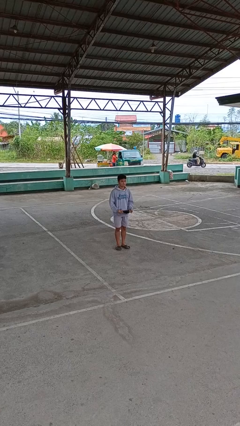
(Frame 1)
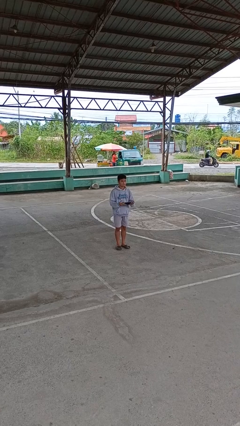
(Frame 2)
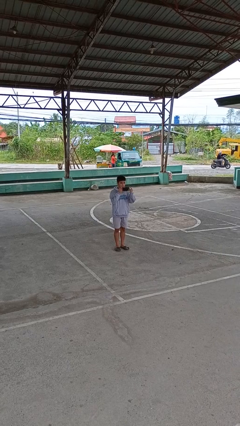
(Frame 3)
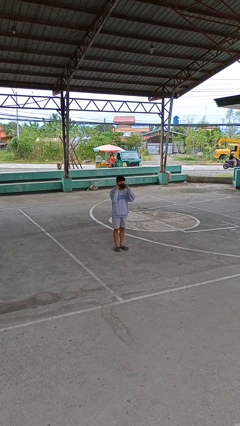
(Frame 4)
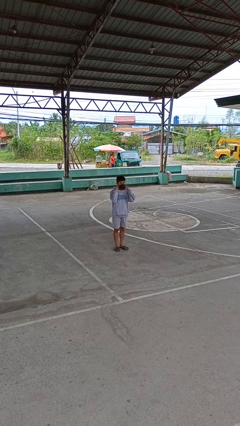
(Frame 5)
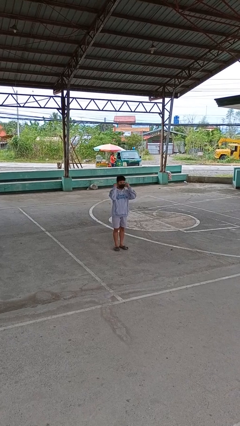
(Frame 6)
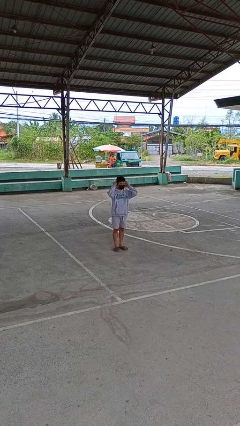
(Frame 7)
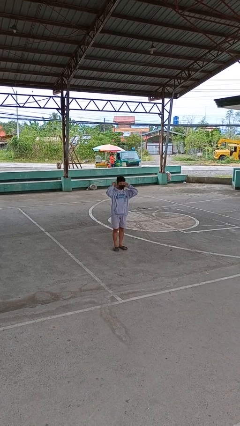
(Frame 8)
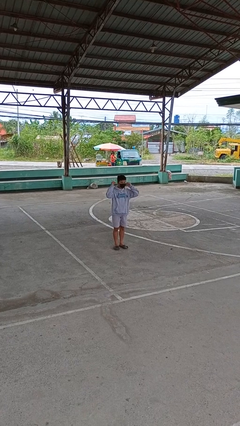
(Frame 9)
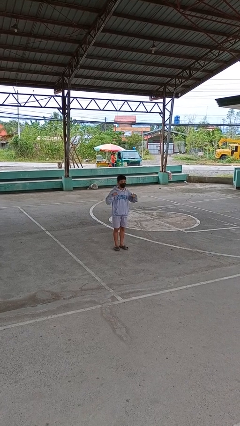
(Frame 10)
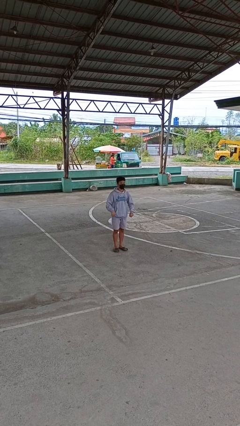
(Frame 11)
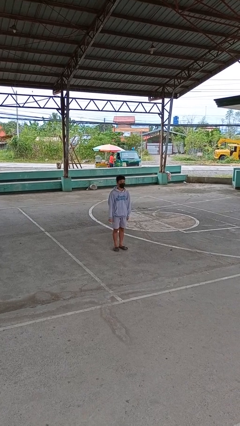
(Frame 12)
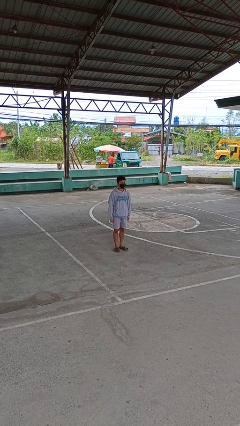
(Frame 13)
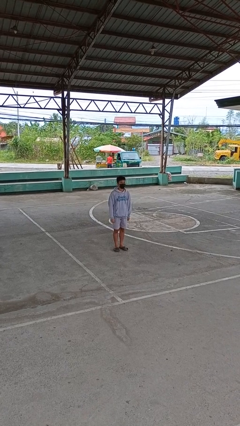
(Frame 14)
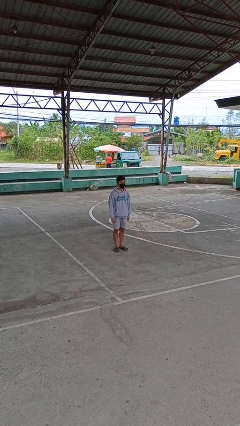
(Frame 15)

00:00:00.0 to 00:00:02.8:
person puts on facemask

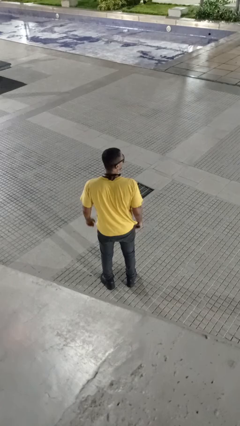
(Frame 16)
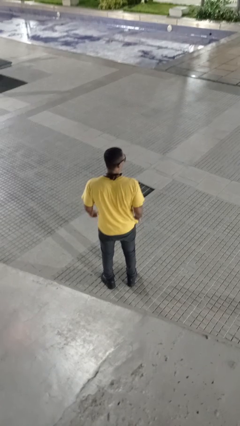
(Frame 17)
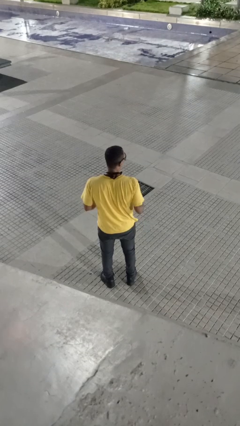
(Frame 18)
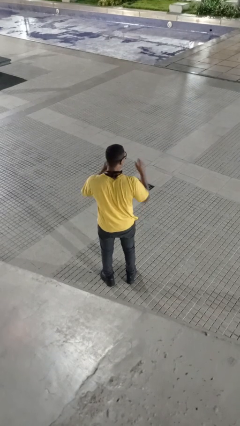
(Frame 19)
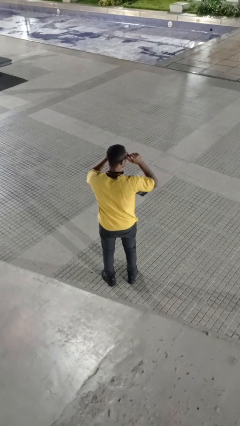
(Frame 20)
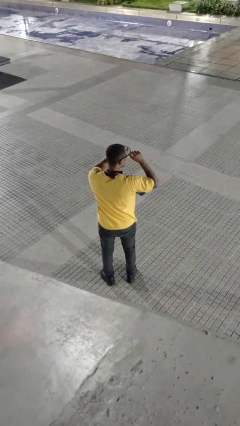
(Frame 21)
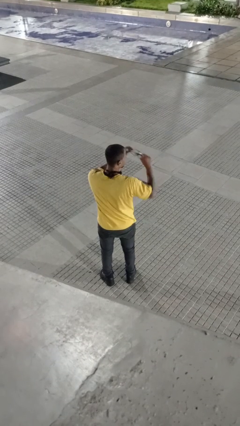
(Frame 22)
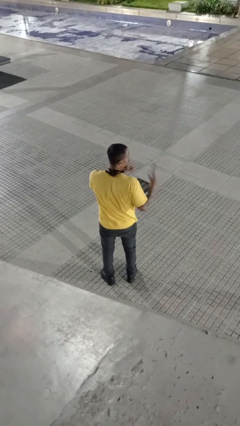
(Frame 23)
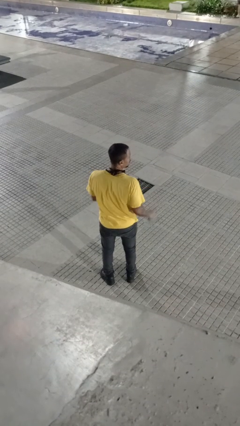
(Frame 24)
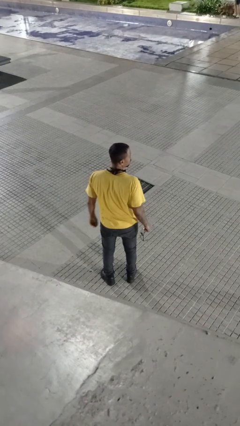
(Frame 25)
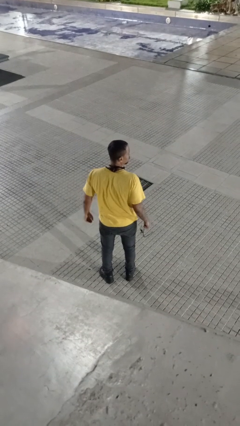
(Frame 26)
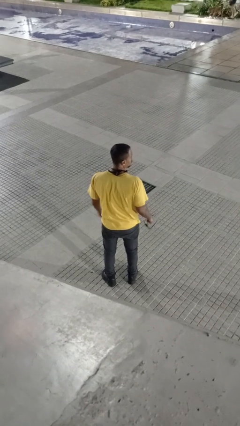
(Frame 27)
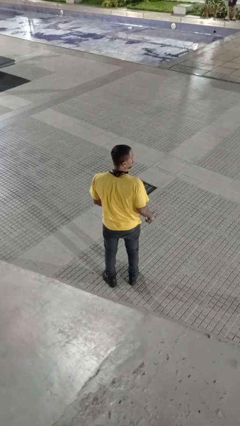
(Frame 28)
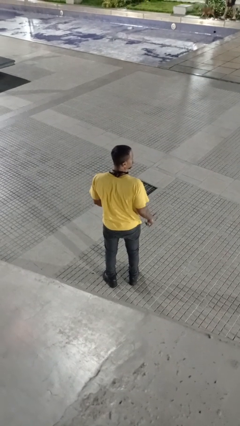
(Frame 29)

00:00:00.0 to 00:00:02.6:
person takes off glasses

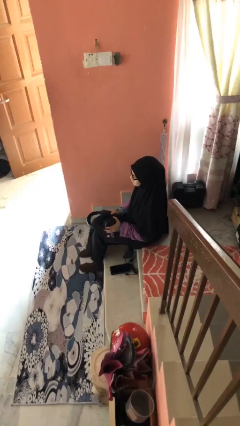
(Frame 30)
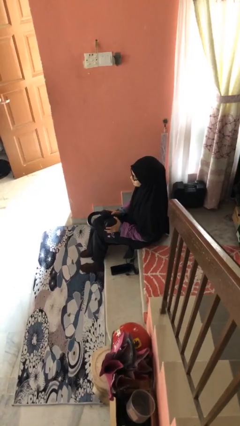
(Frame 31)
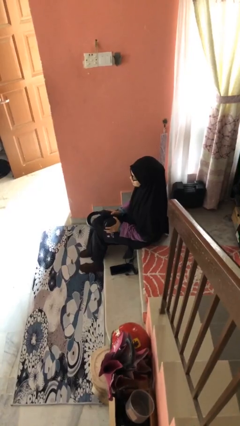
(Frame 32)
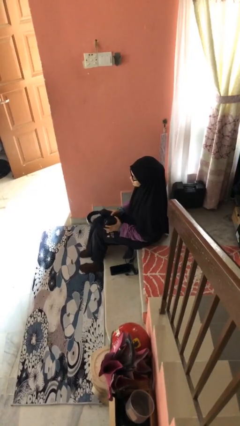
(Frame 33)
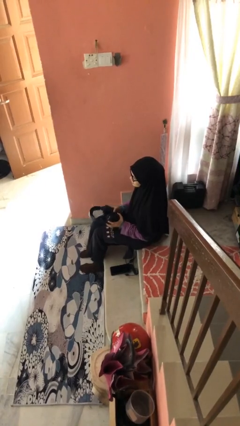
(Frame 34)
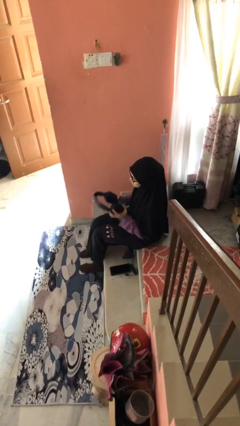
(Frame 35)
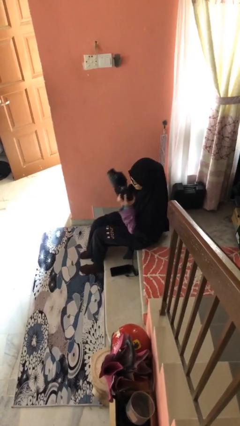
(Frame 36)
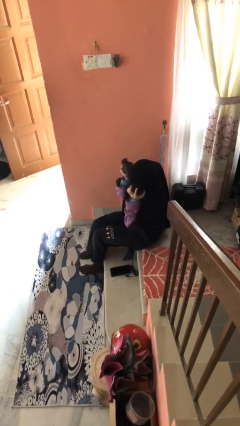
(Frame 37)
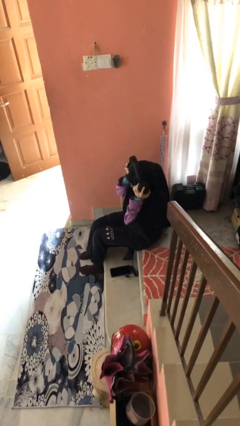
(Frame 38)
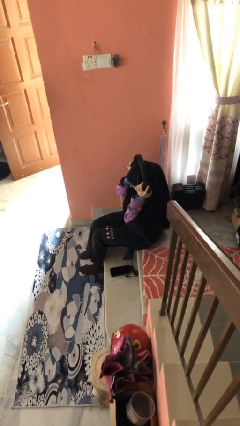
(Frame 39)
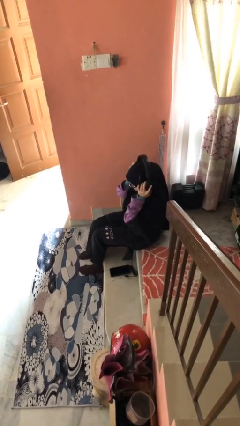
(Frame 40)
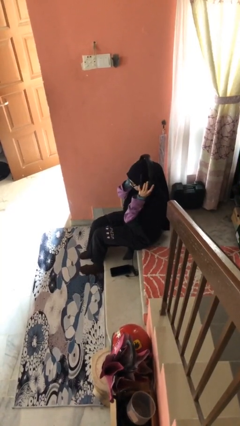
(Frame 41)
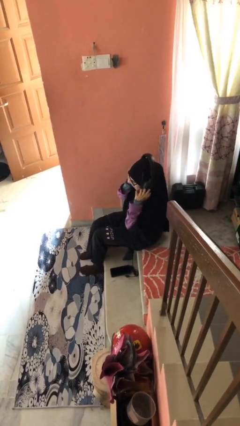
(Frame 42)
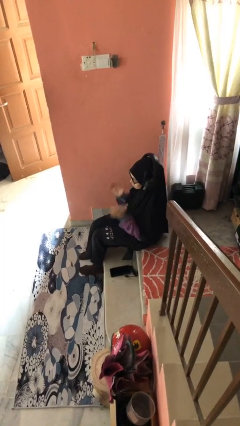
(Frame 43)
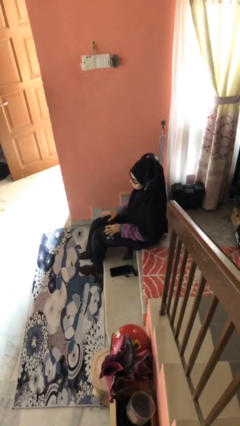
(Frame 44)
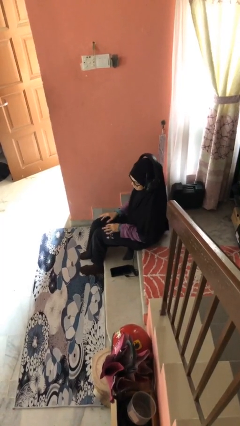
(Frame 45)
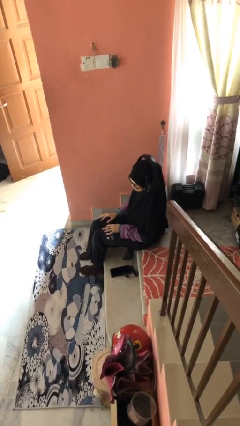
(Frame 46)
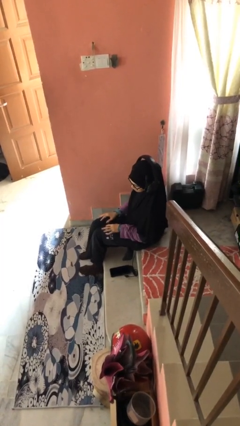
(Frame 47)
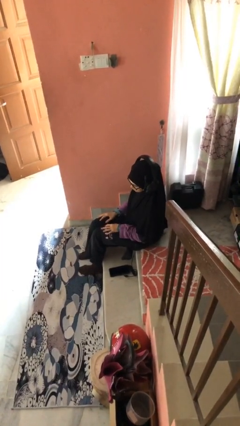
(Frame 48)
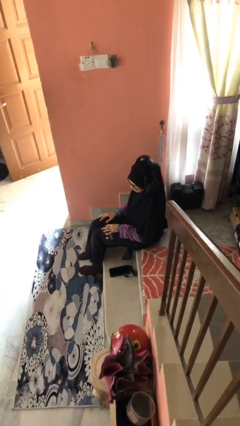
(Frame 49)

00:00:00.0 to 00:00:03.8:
person puts on headphones

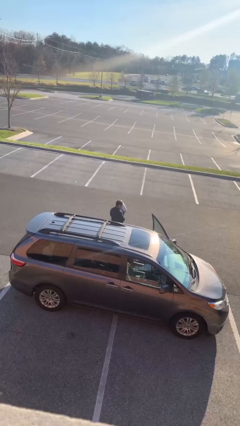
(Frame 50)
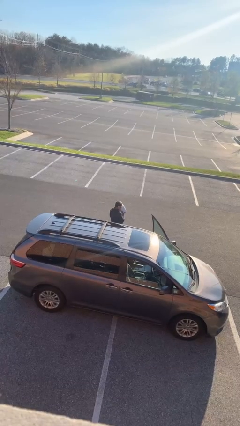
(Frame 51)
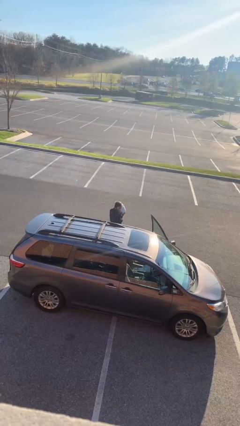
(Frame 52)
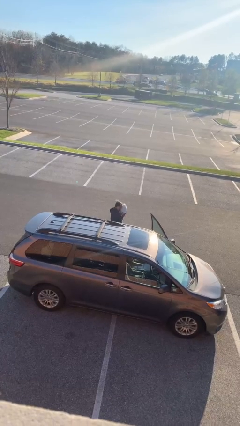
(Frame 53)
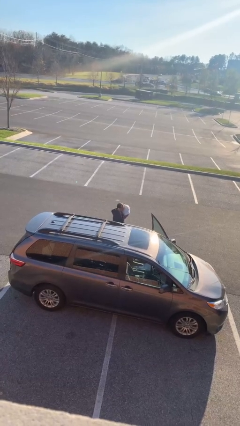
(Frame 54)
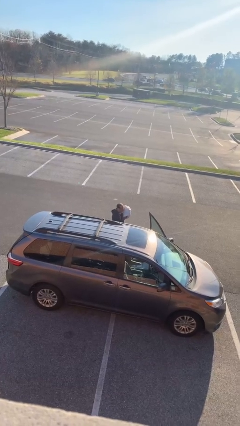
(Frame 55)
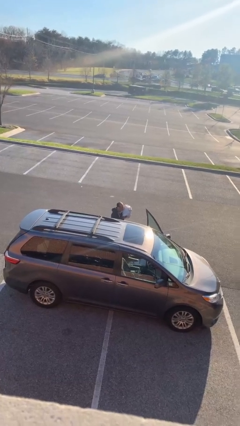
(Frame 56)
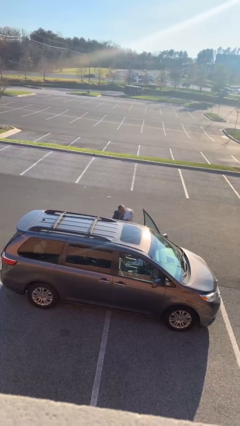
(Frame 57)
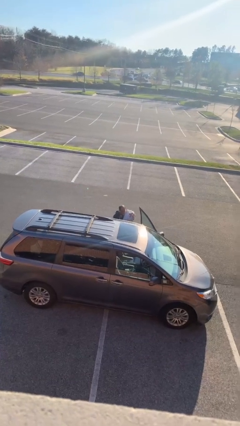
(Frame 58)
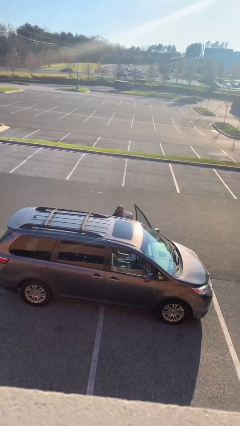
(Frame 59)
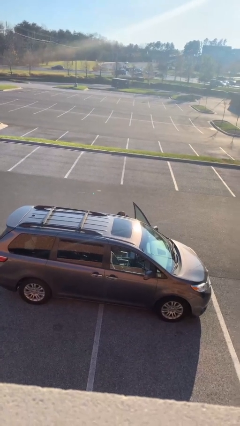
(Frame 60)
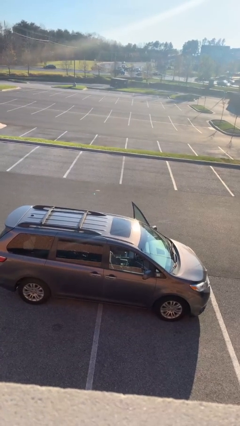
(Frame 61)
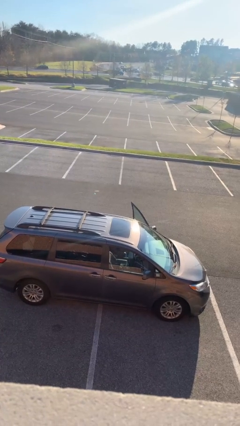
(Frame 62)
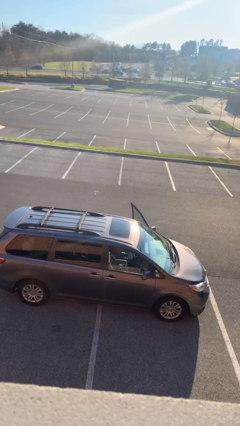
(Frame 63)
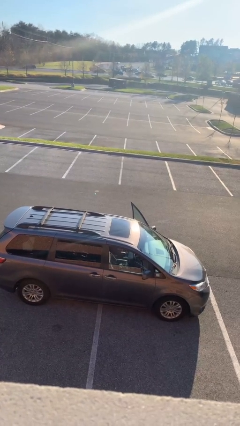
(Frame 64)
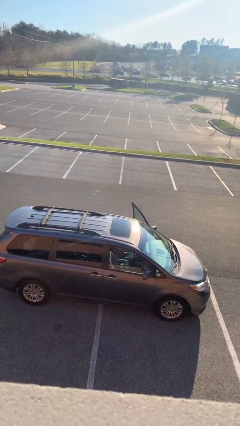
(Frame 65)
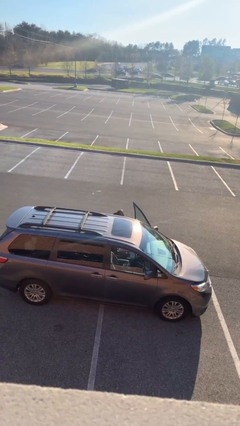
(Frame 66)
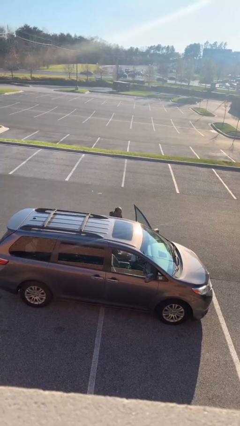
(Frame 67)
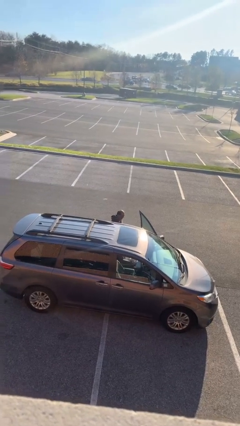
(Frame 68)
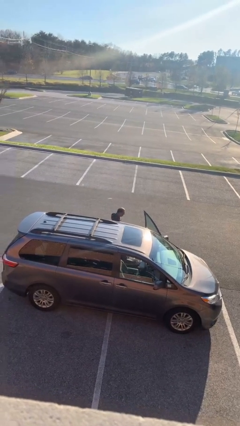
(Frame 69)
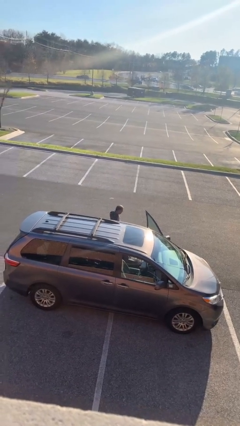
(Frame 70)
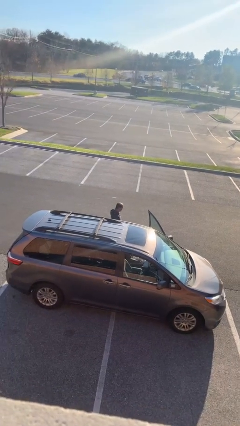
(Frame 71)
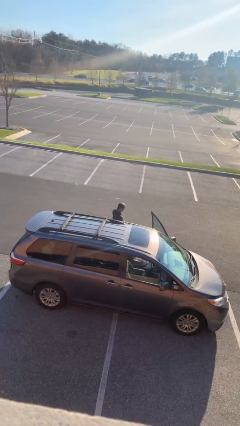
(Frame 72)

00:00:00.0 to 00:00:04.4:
person loads car

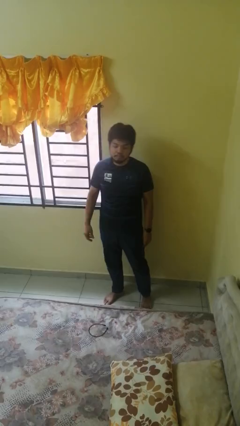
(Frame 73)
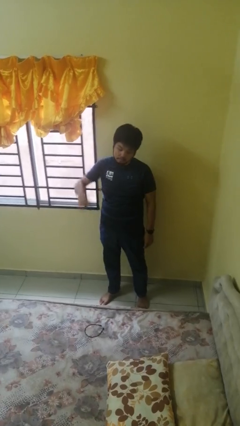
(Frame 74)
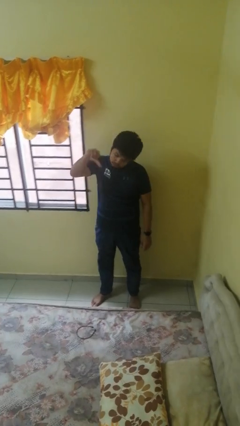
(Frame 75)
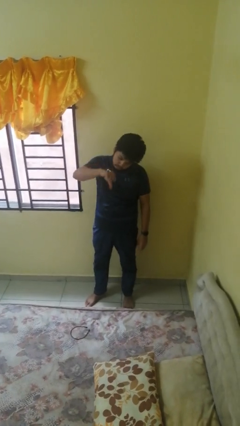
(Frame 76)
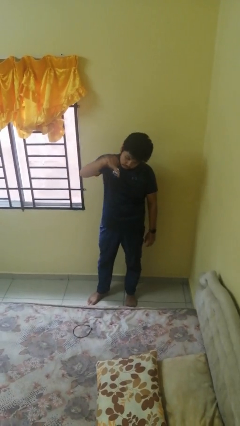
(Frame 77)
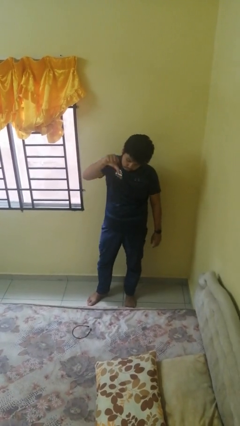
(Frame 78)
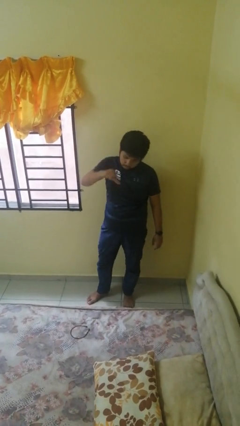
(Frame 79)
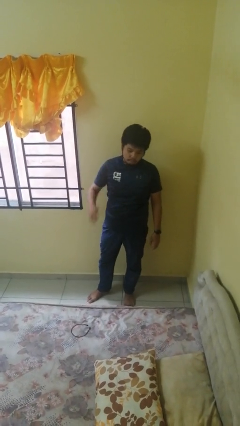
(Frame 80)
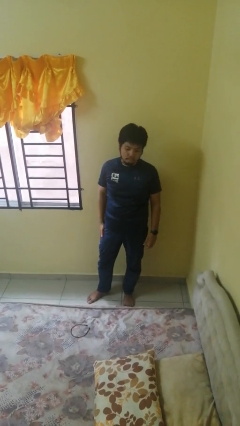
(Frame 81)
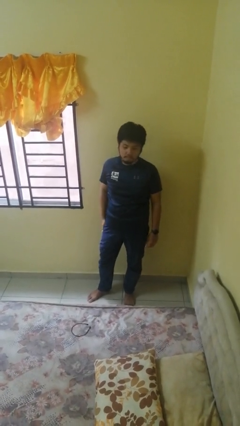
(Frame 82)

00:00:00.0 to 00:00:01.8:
person gestures thumbs down

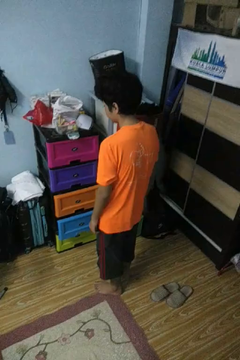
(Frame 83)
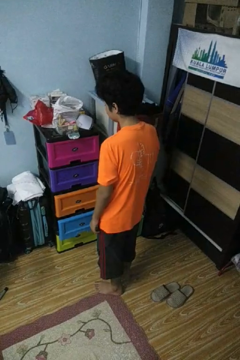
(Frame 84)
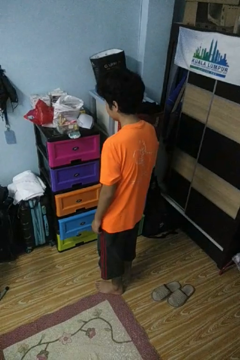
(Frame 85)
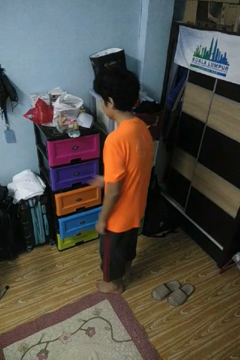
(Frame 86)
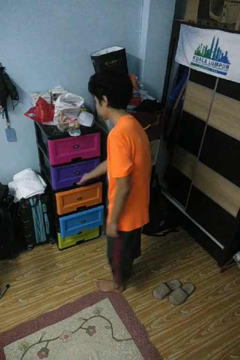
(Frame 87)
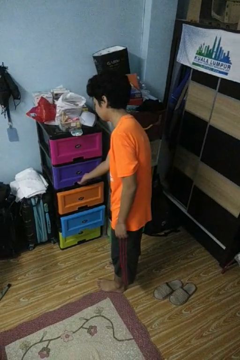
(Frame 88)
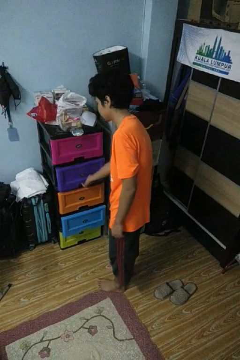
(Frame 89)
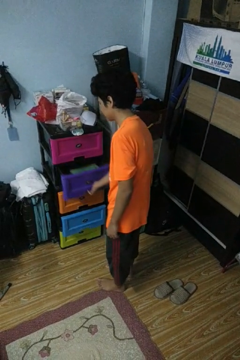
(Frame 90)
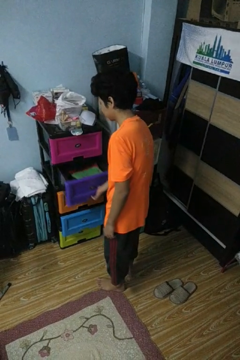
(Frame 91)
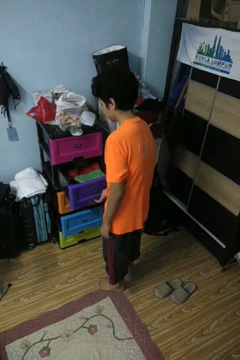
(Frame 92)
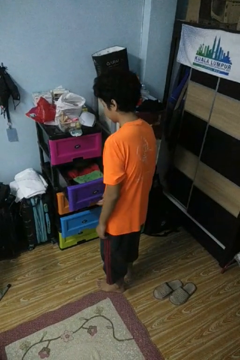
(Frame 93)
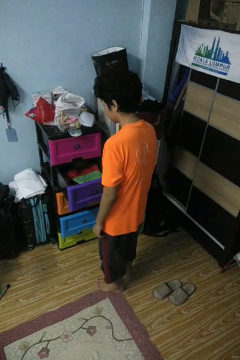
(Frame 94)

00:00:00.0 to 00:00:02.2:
person opens dresser drawer
